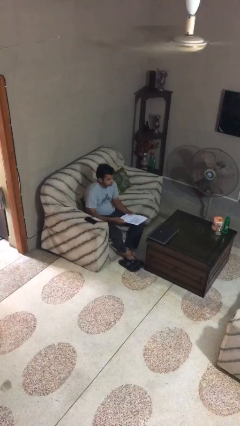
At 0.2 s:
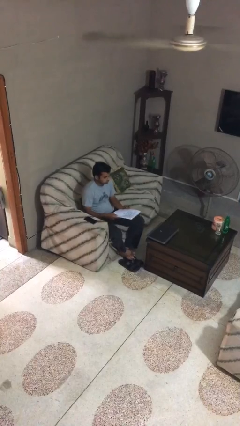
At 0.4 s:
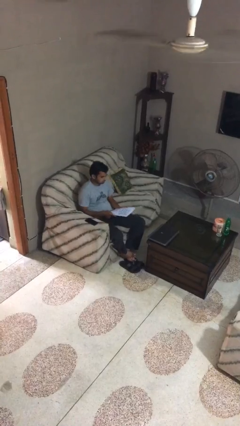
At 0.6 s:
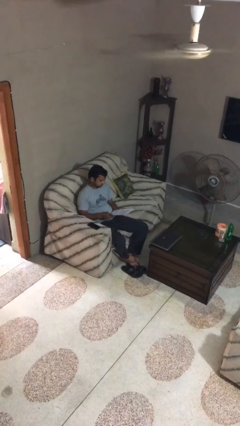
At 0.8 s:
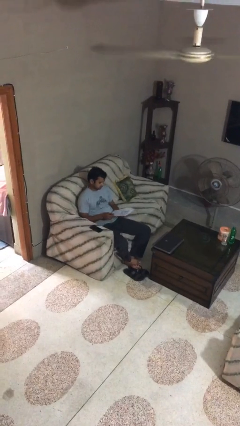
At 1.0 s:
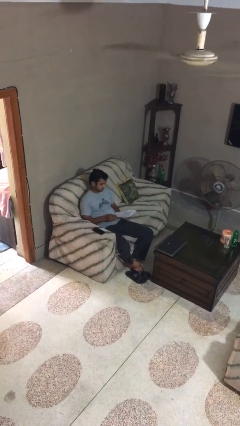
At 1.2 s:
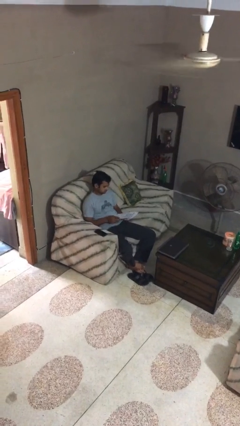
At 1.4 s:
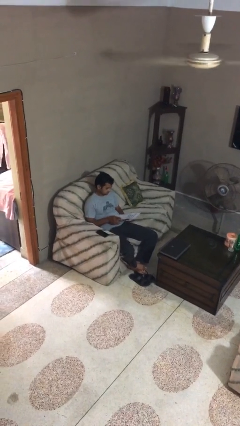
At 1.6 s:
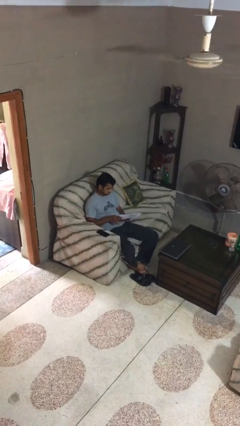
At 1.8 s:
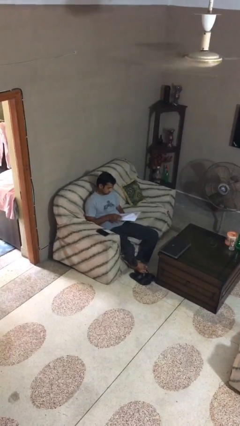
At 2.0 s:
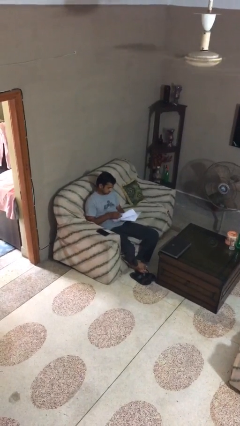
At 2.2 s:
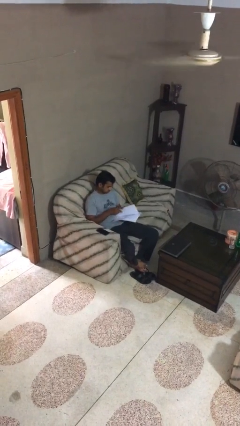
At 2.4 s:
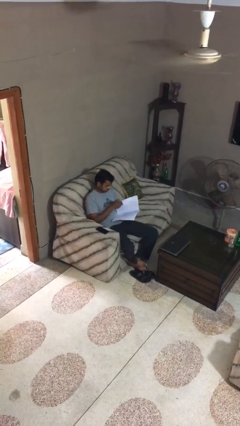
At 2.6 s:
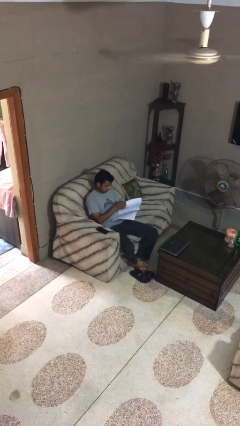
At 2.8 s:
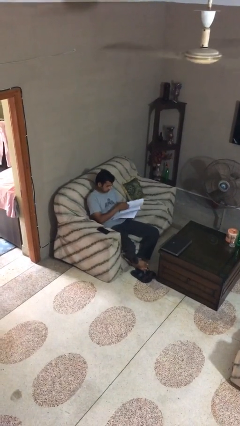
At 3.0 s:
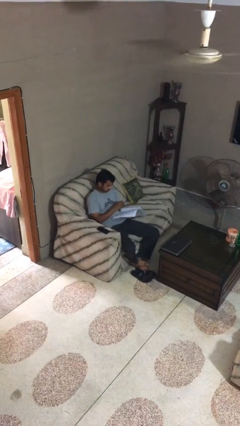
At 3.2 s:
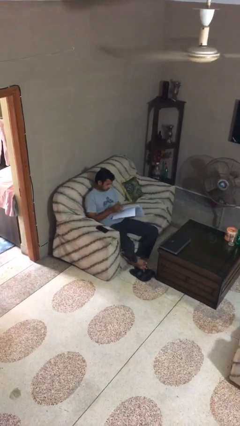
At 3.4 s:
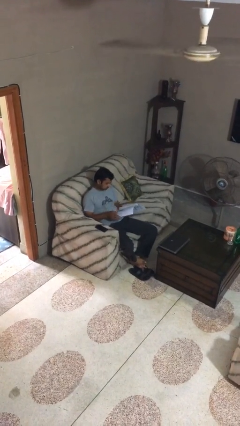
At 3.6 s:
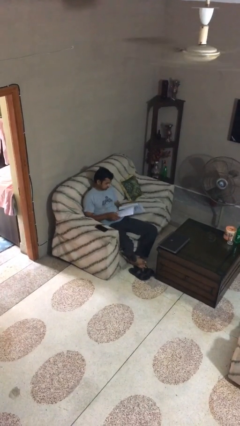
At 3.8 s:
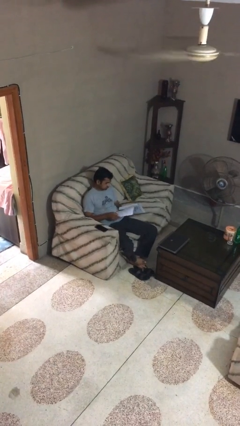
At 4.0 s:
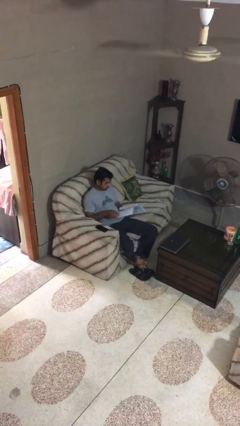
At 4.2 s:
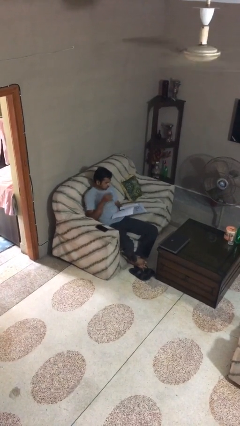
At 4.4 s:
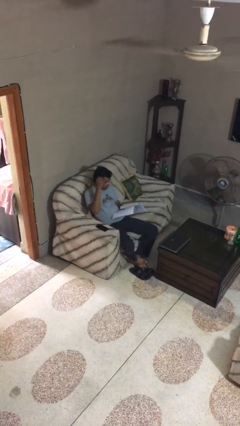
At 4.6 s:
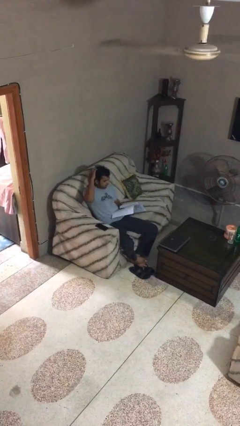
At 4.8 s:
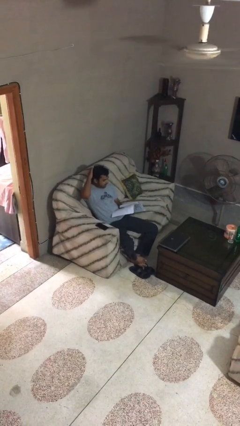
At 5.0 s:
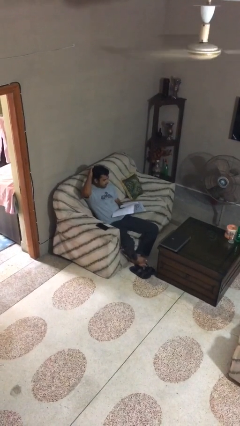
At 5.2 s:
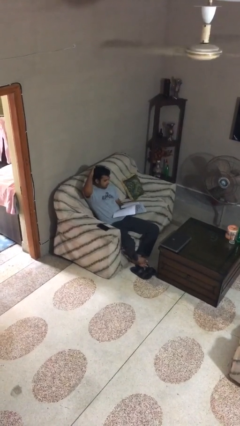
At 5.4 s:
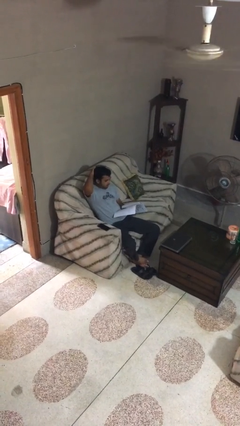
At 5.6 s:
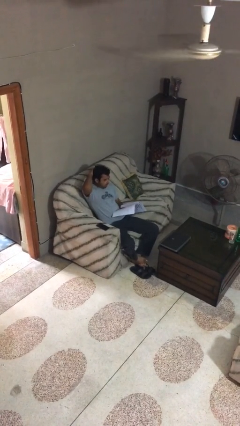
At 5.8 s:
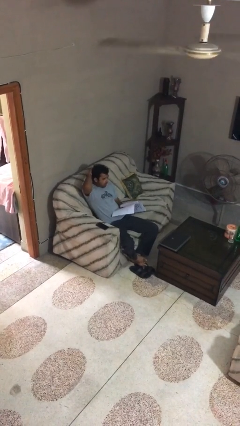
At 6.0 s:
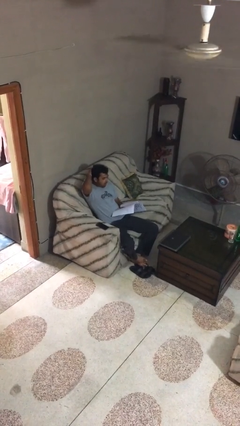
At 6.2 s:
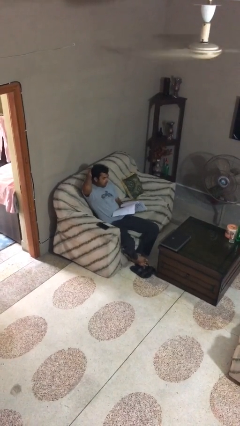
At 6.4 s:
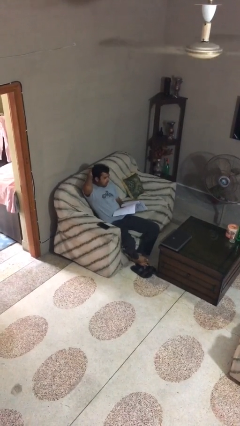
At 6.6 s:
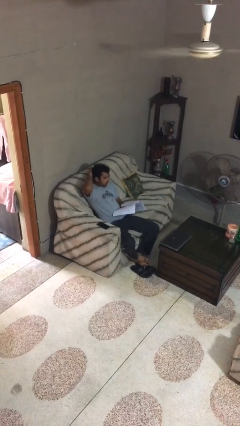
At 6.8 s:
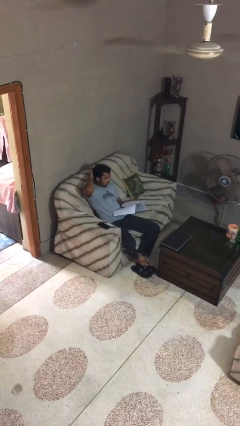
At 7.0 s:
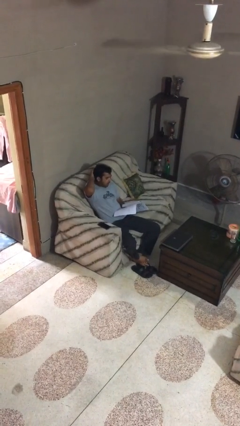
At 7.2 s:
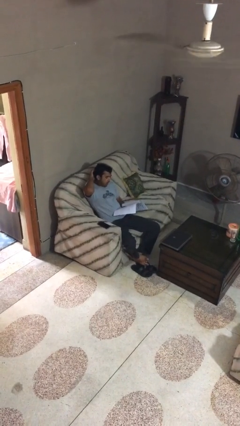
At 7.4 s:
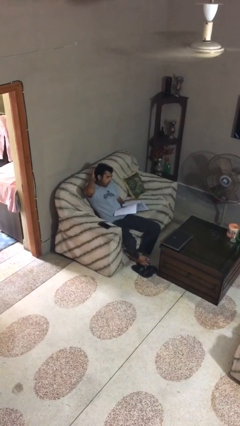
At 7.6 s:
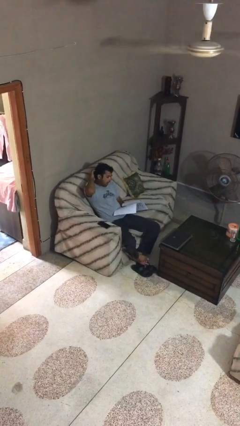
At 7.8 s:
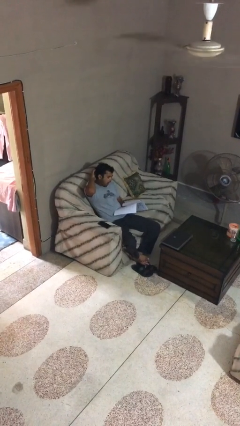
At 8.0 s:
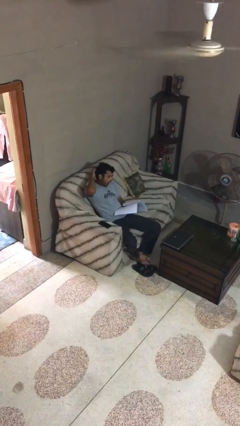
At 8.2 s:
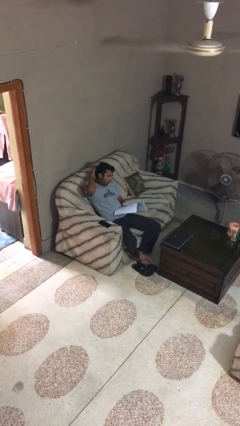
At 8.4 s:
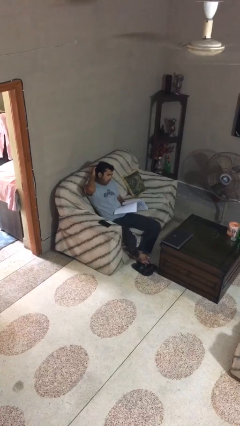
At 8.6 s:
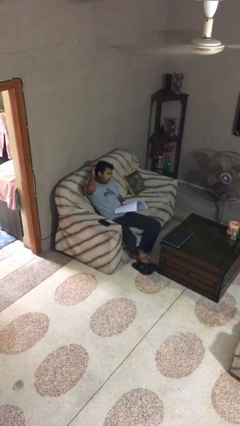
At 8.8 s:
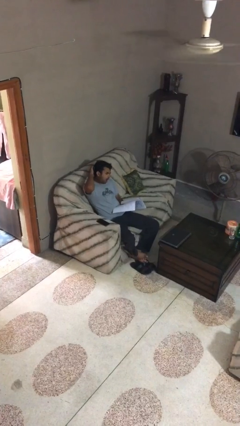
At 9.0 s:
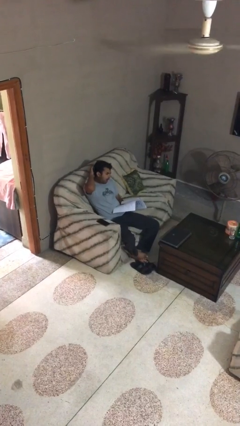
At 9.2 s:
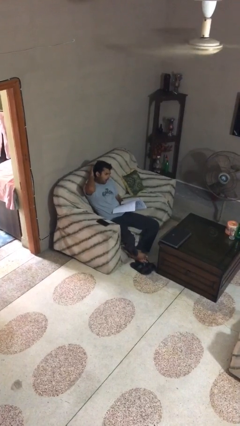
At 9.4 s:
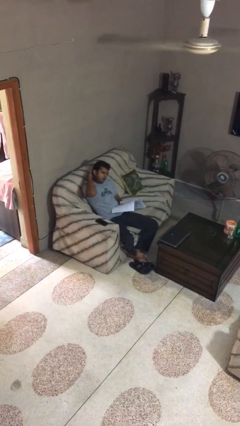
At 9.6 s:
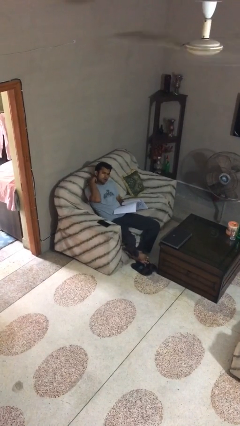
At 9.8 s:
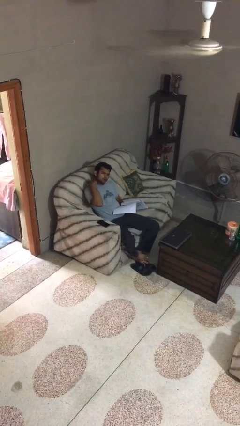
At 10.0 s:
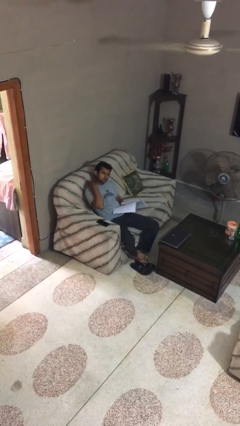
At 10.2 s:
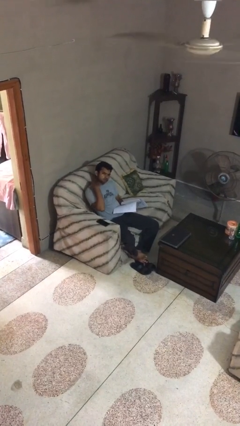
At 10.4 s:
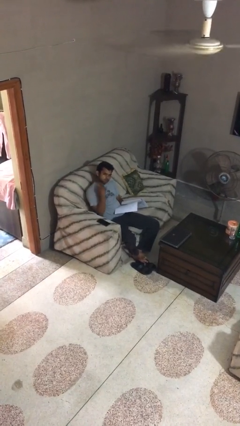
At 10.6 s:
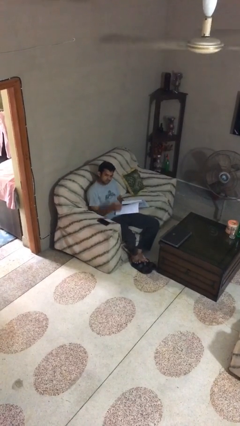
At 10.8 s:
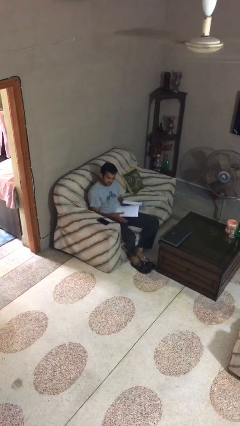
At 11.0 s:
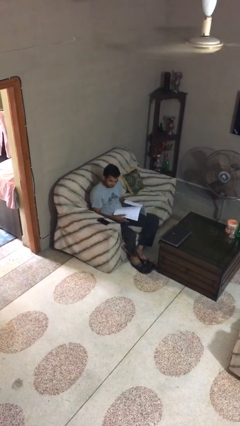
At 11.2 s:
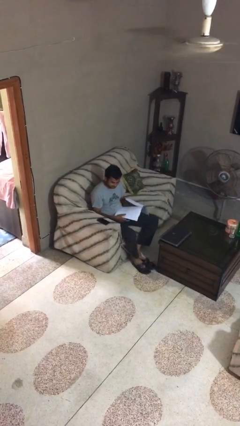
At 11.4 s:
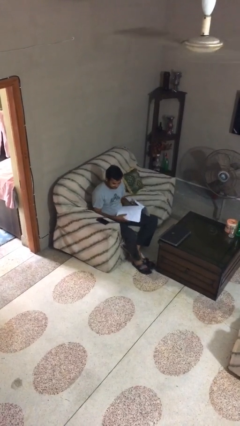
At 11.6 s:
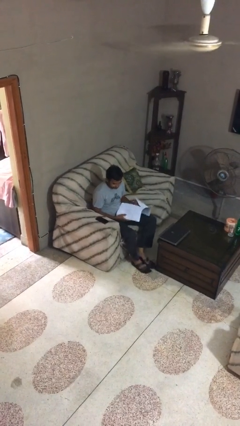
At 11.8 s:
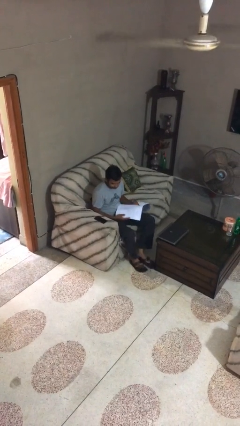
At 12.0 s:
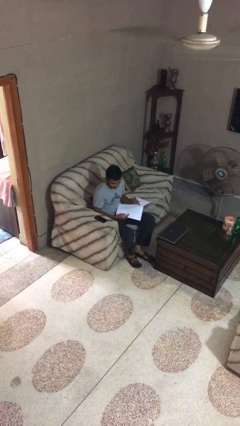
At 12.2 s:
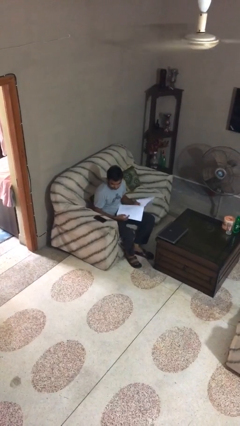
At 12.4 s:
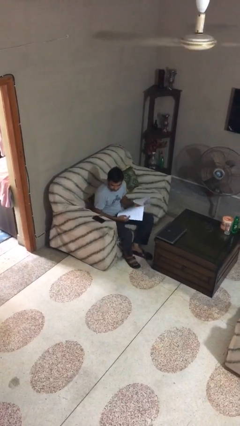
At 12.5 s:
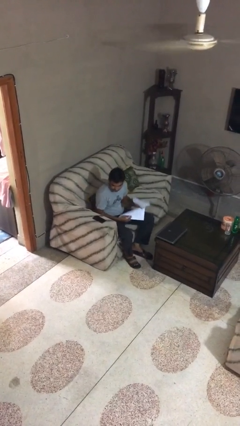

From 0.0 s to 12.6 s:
person reads document

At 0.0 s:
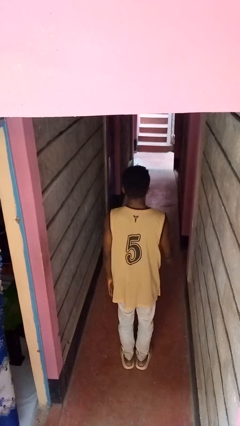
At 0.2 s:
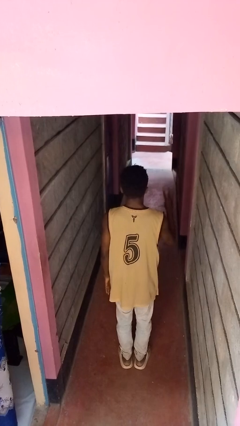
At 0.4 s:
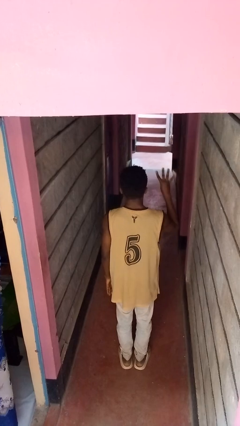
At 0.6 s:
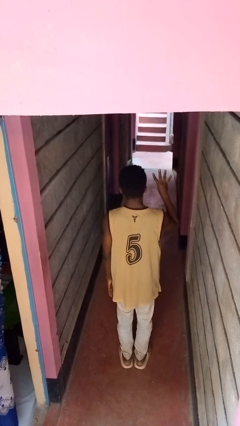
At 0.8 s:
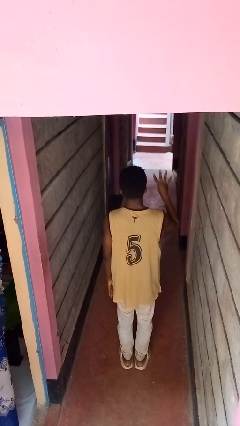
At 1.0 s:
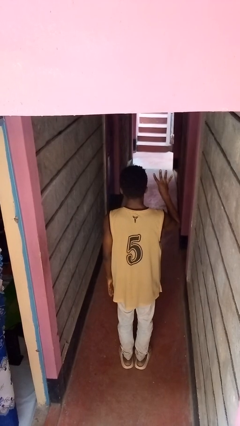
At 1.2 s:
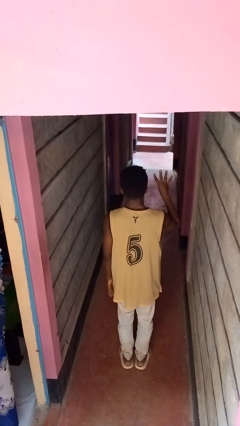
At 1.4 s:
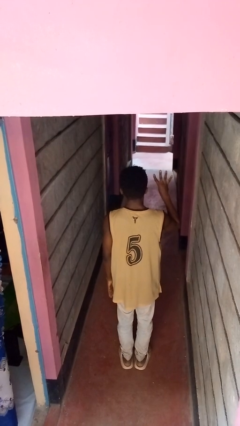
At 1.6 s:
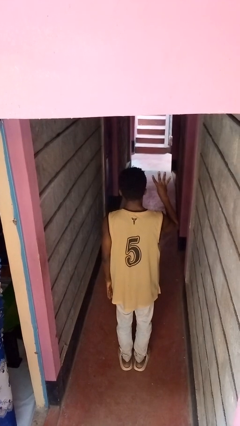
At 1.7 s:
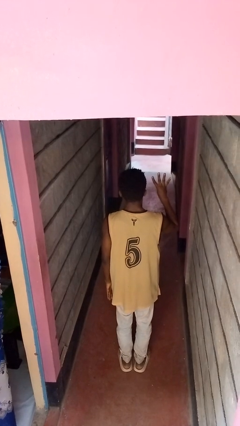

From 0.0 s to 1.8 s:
person gestures number four

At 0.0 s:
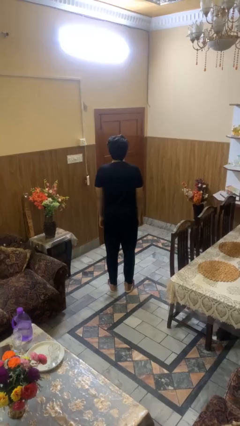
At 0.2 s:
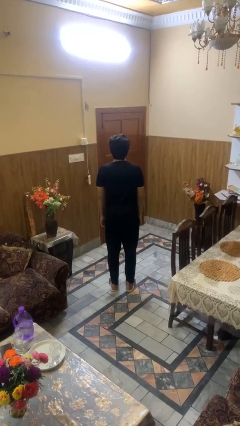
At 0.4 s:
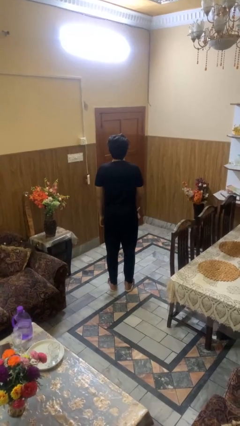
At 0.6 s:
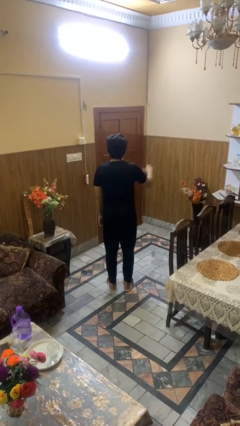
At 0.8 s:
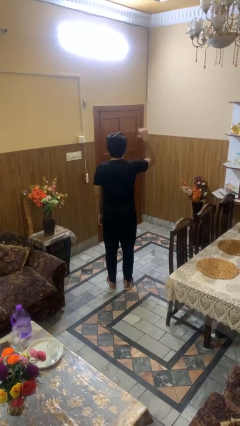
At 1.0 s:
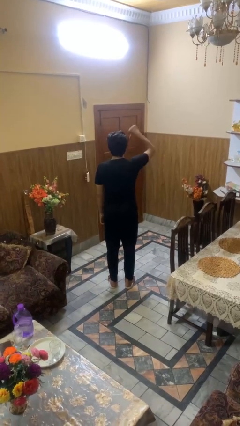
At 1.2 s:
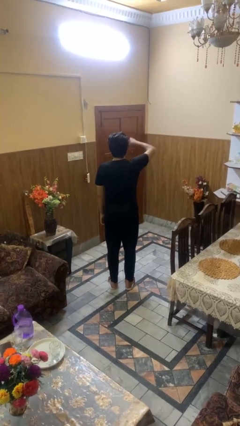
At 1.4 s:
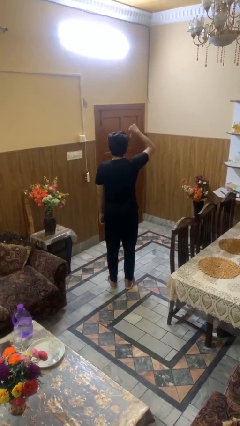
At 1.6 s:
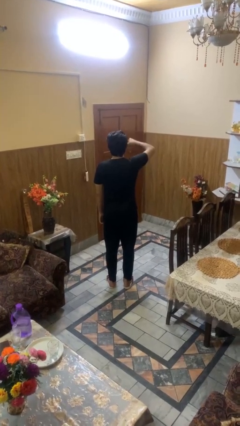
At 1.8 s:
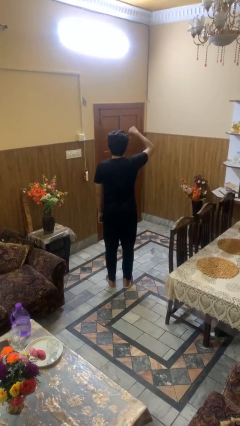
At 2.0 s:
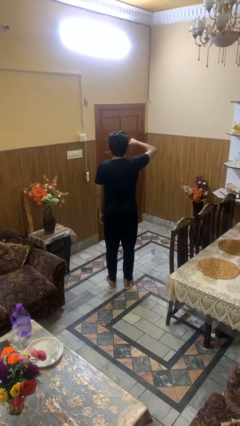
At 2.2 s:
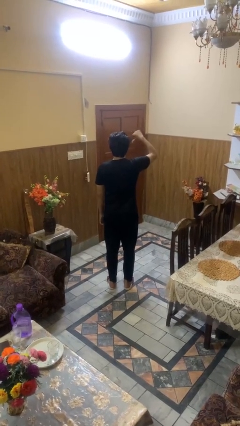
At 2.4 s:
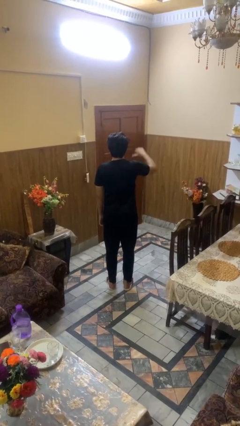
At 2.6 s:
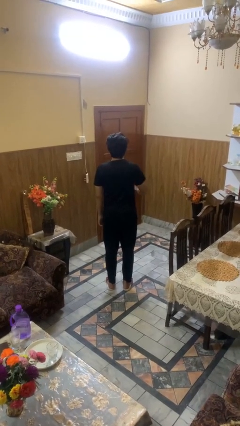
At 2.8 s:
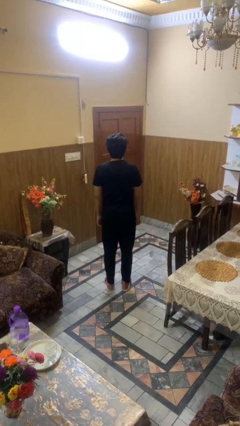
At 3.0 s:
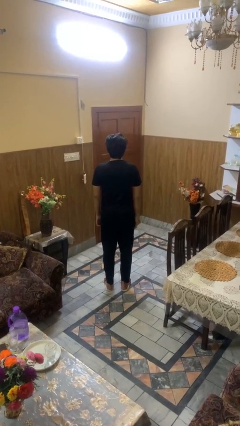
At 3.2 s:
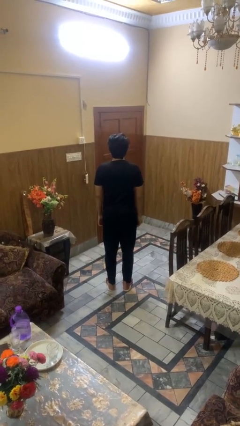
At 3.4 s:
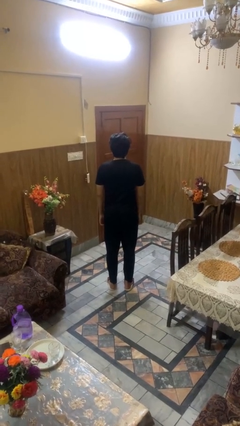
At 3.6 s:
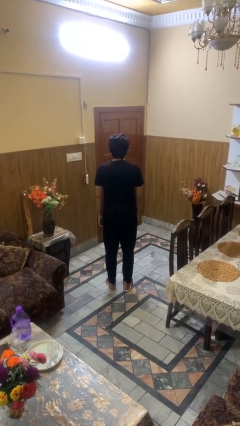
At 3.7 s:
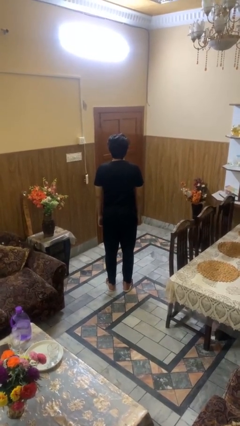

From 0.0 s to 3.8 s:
person gestures thumbs down
